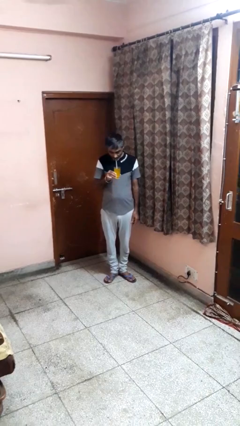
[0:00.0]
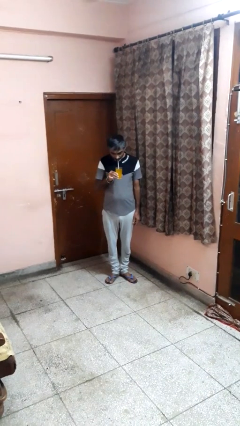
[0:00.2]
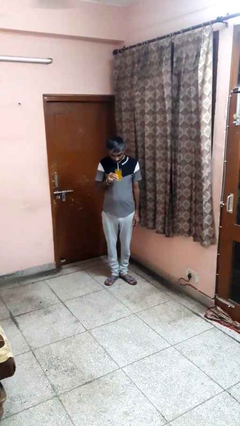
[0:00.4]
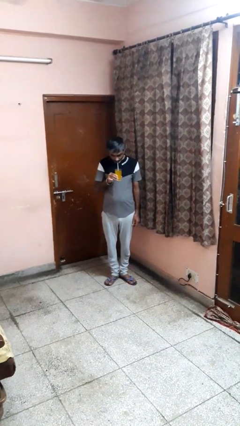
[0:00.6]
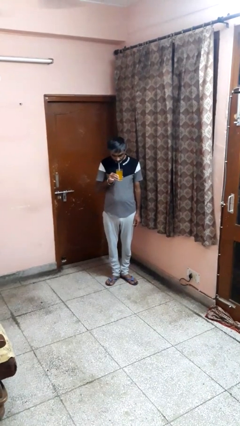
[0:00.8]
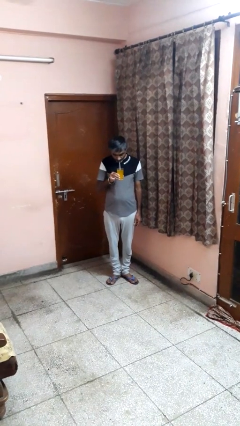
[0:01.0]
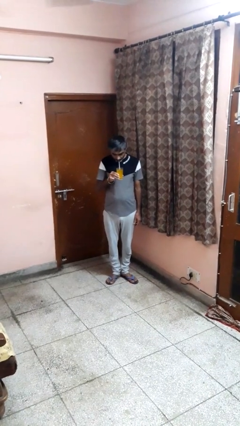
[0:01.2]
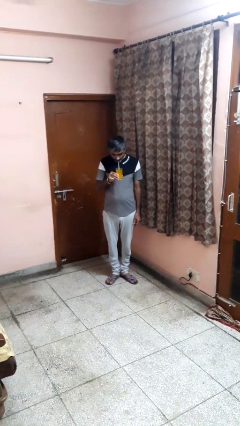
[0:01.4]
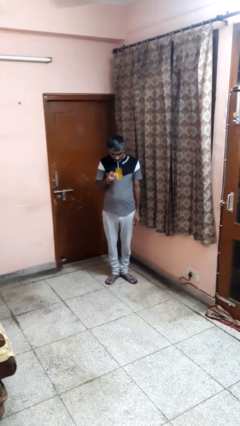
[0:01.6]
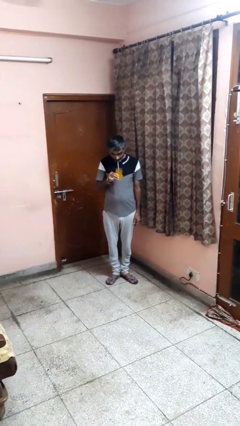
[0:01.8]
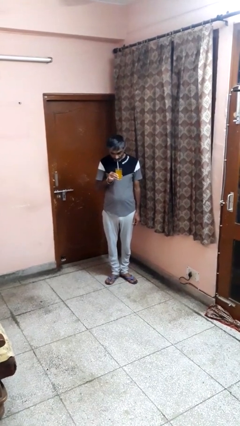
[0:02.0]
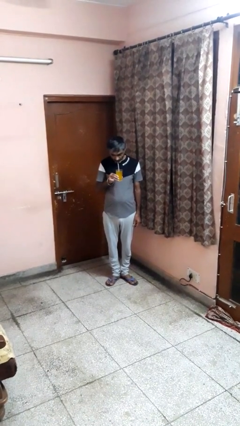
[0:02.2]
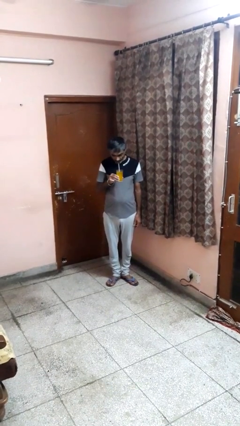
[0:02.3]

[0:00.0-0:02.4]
person drinks from straw

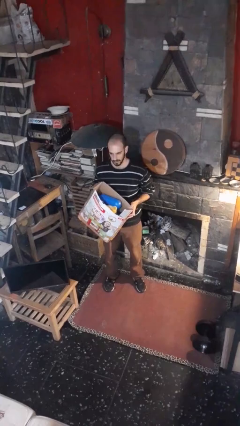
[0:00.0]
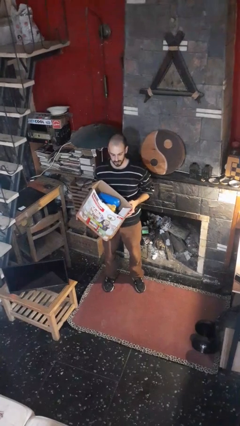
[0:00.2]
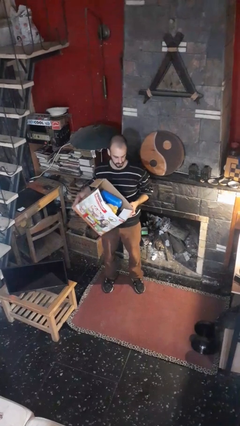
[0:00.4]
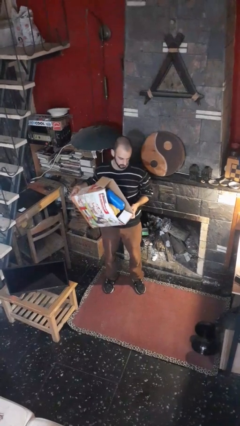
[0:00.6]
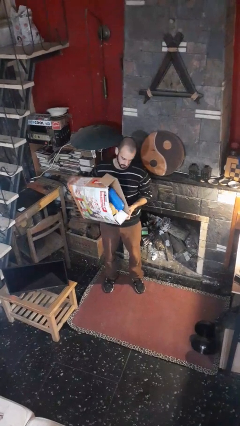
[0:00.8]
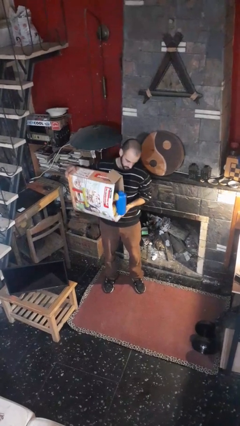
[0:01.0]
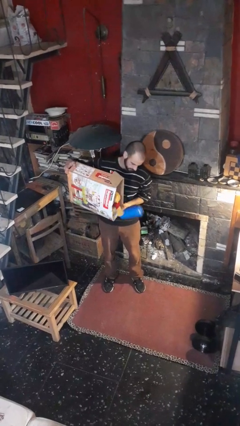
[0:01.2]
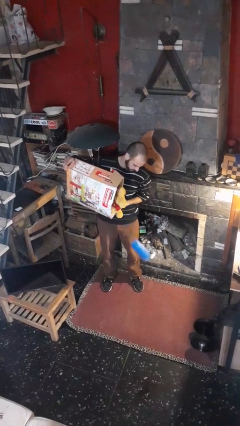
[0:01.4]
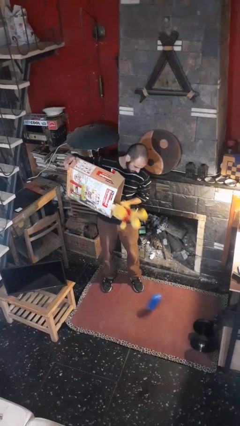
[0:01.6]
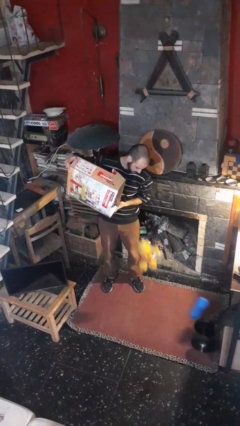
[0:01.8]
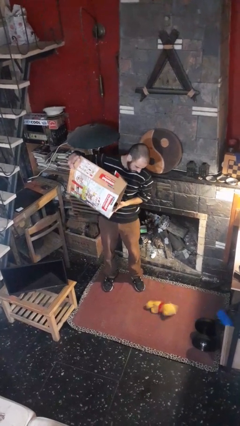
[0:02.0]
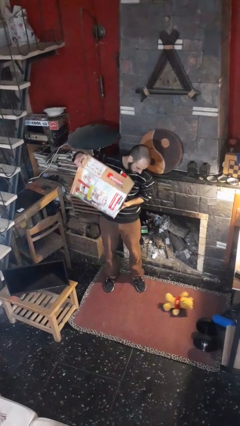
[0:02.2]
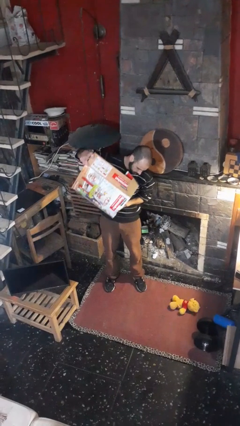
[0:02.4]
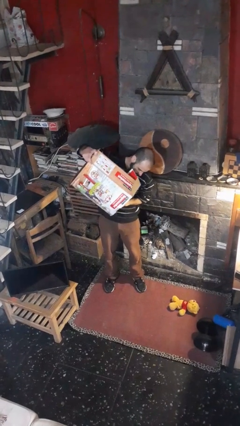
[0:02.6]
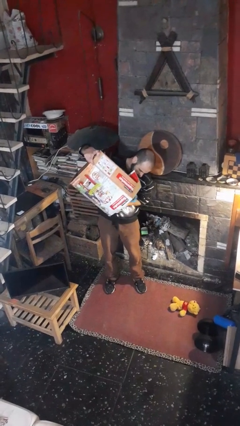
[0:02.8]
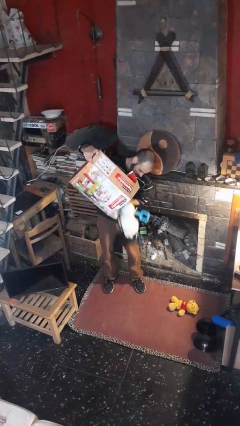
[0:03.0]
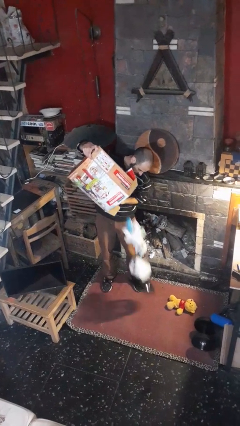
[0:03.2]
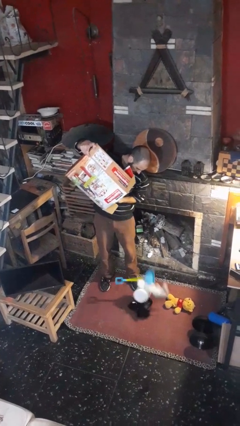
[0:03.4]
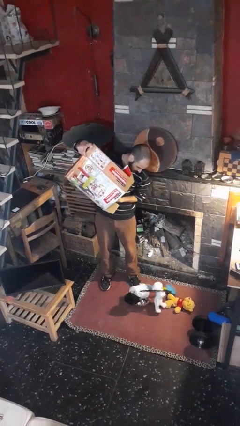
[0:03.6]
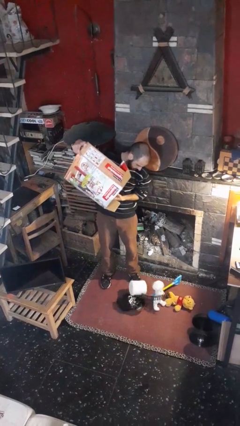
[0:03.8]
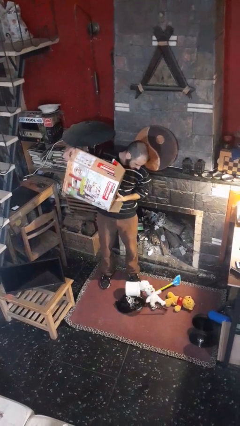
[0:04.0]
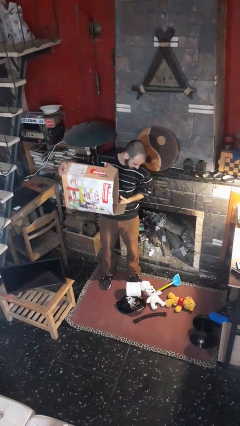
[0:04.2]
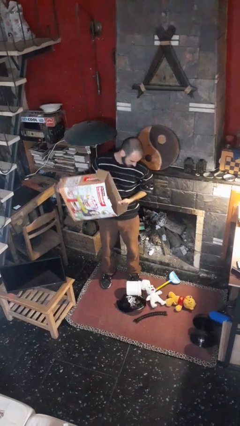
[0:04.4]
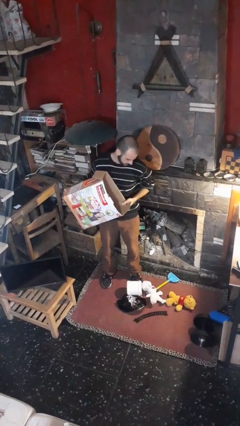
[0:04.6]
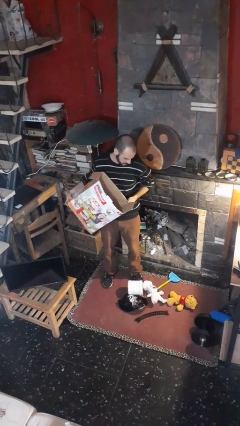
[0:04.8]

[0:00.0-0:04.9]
person unloads box onto floor

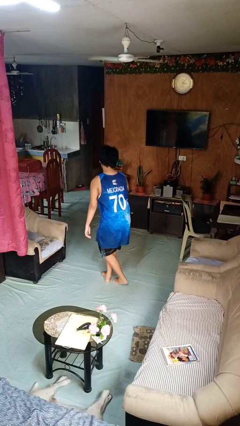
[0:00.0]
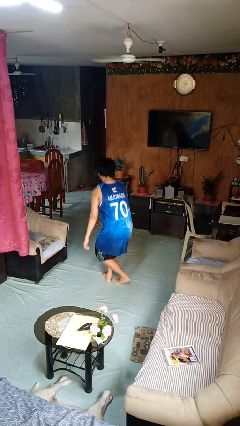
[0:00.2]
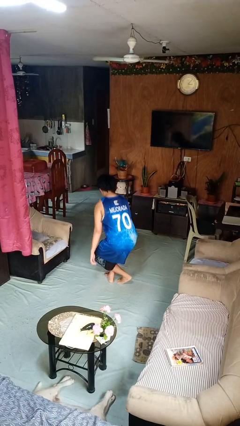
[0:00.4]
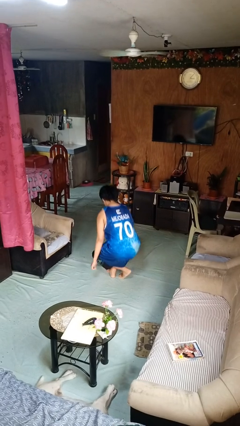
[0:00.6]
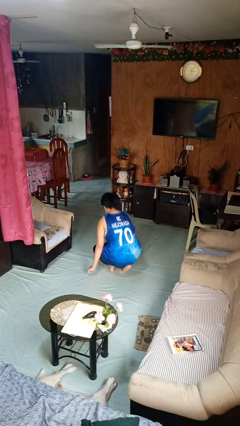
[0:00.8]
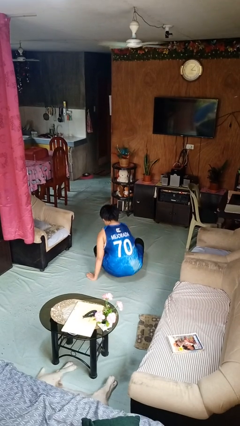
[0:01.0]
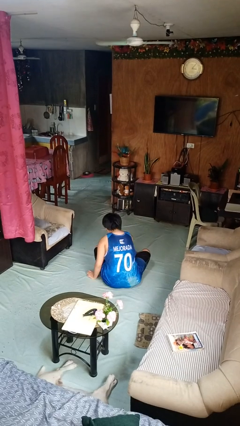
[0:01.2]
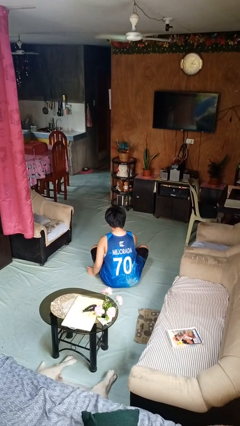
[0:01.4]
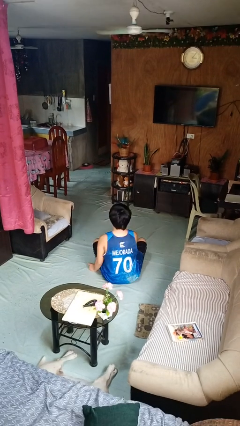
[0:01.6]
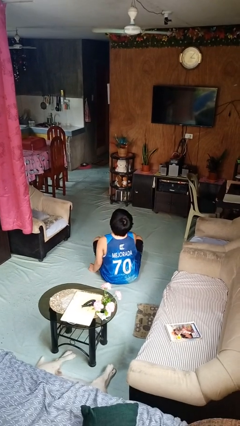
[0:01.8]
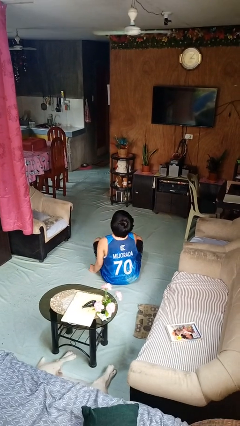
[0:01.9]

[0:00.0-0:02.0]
person sits crisscross

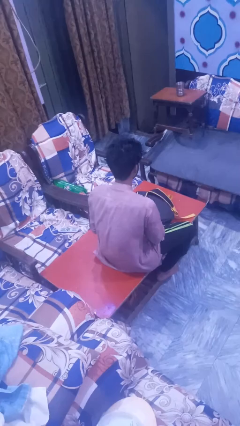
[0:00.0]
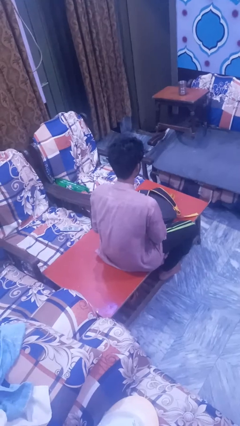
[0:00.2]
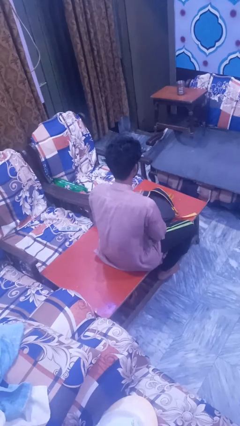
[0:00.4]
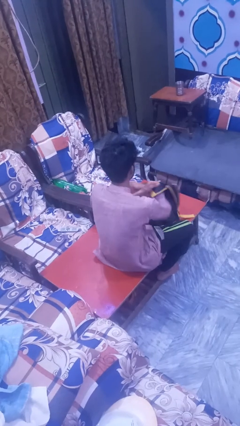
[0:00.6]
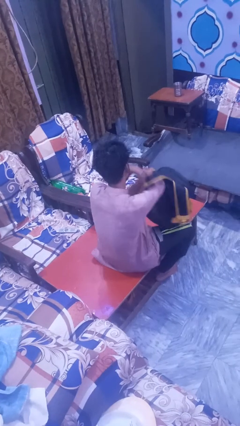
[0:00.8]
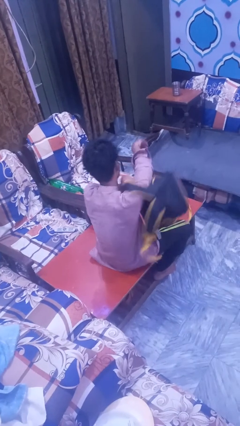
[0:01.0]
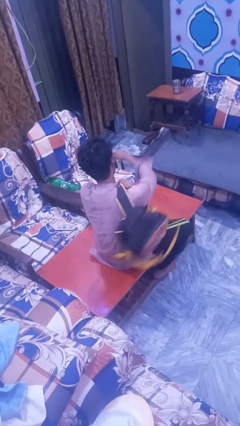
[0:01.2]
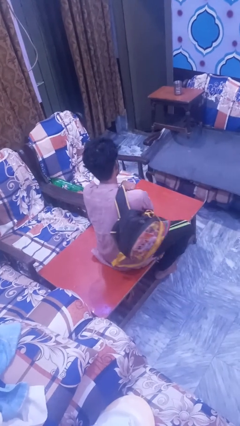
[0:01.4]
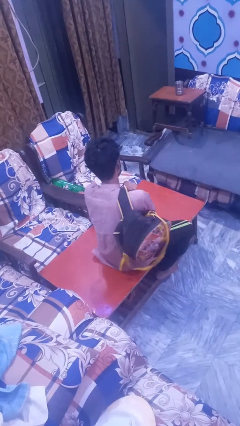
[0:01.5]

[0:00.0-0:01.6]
person puts on backpack

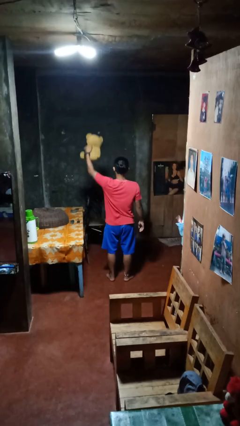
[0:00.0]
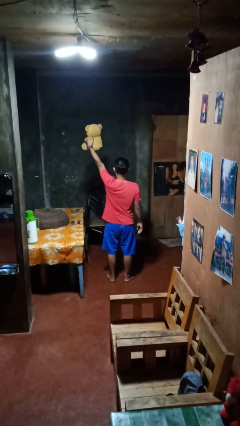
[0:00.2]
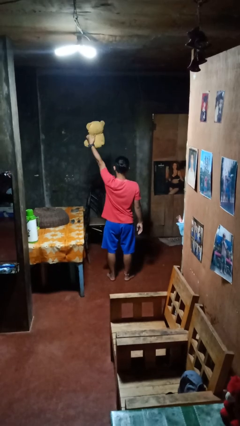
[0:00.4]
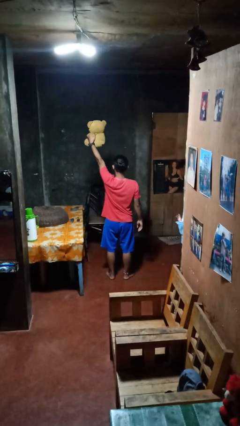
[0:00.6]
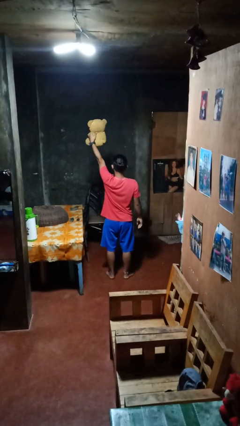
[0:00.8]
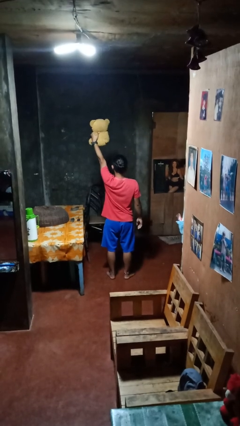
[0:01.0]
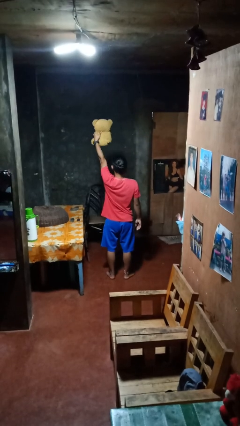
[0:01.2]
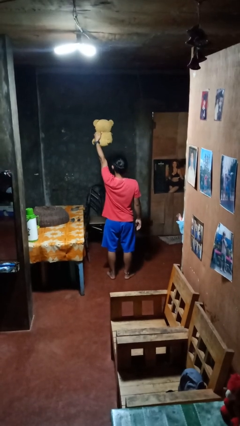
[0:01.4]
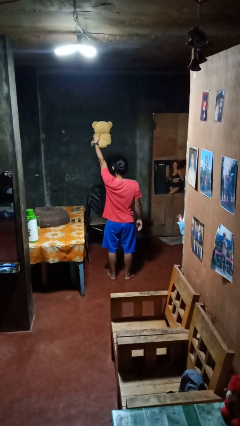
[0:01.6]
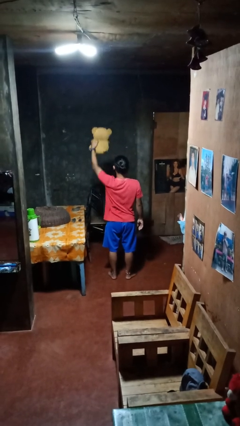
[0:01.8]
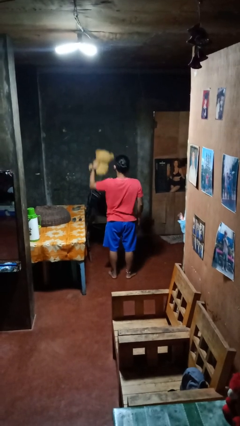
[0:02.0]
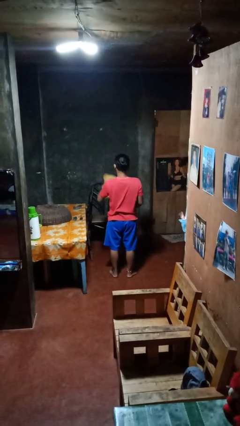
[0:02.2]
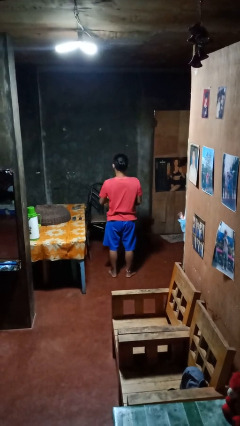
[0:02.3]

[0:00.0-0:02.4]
person holds object above head

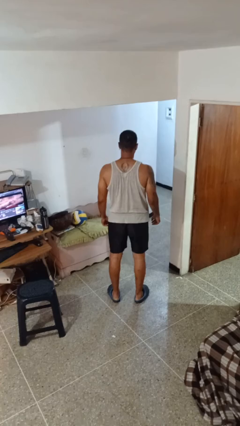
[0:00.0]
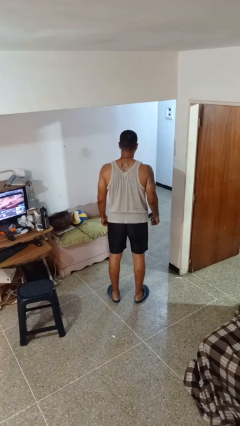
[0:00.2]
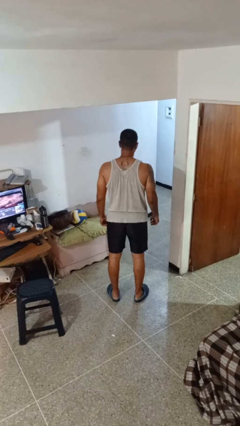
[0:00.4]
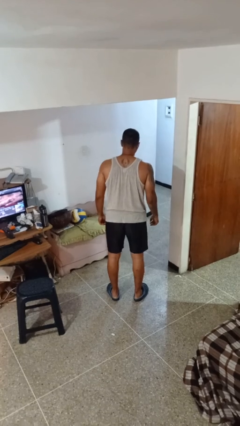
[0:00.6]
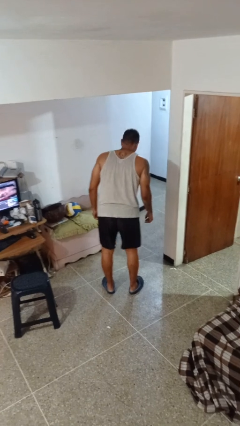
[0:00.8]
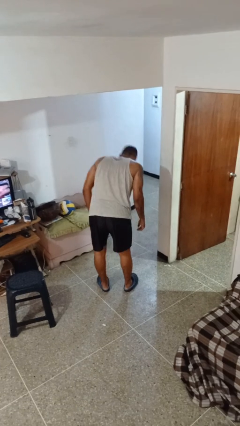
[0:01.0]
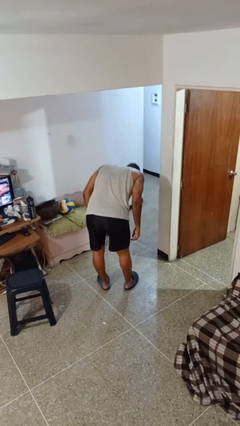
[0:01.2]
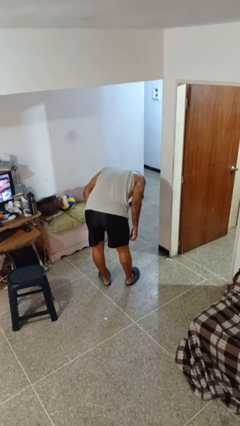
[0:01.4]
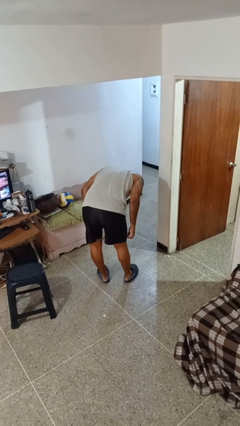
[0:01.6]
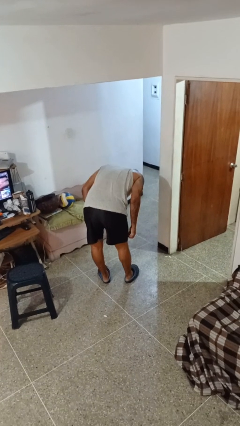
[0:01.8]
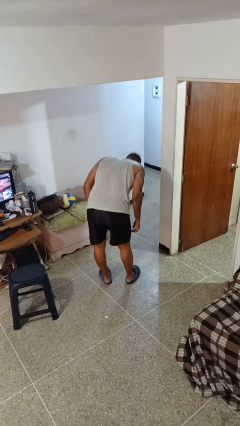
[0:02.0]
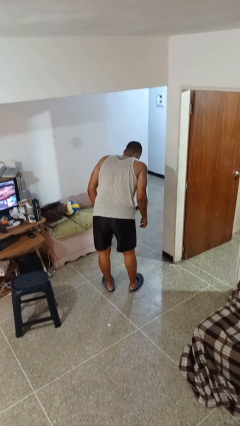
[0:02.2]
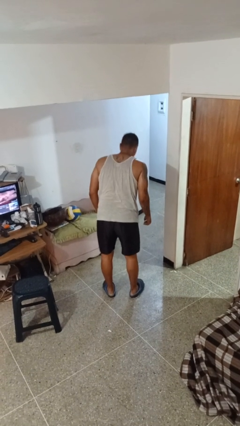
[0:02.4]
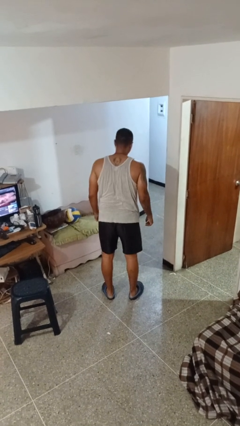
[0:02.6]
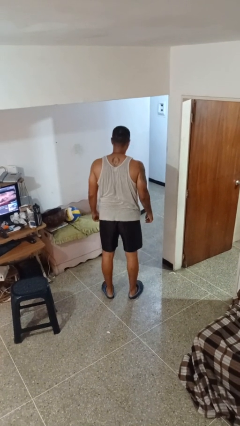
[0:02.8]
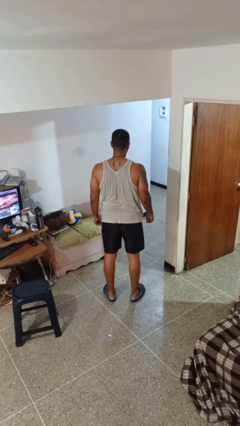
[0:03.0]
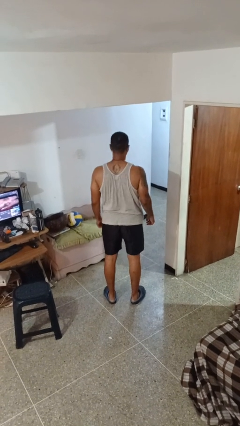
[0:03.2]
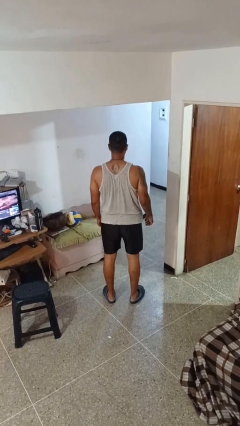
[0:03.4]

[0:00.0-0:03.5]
person bows

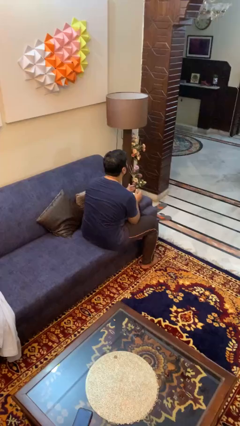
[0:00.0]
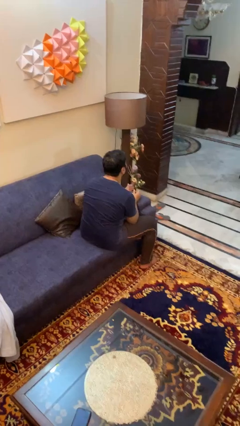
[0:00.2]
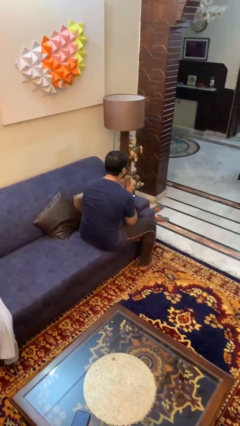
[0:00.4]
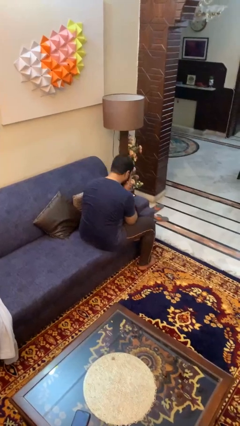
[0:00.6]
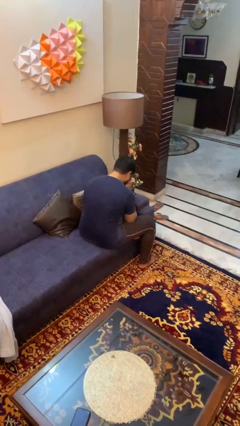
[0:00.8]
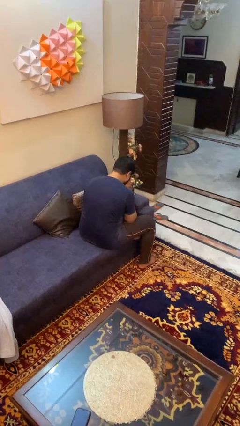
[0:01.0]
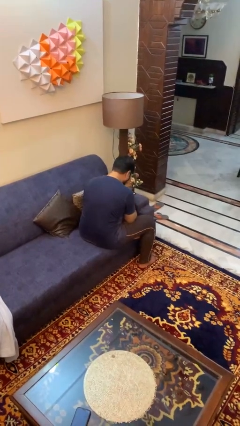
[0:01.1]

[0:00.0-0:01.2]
person sneezes into hand
